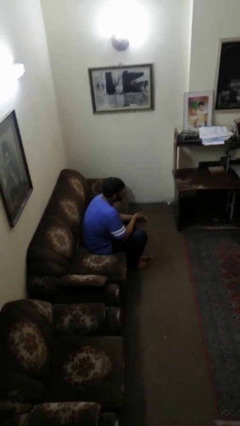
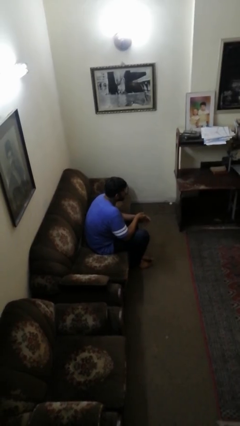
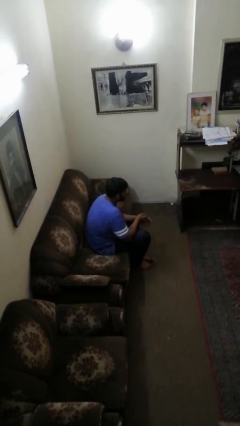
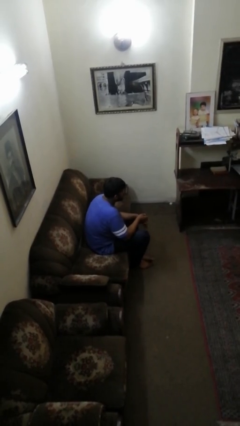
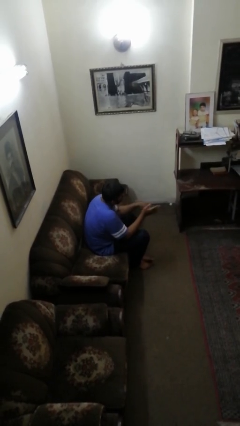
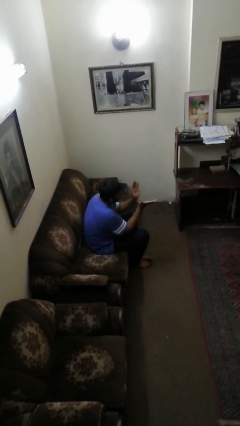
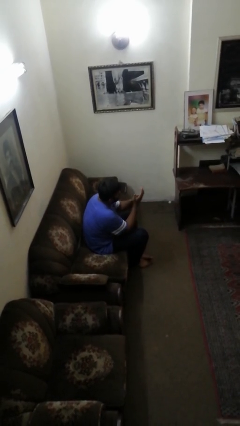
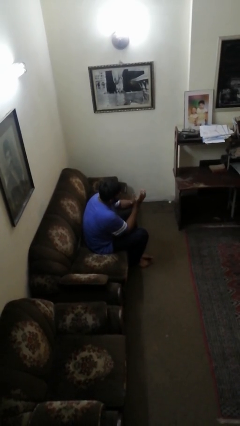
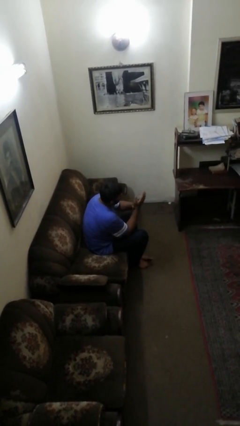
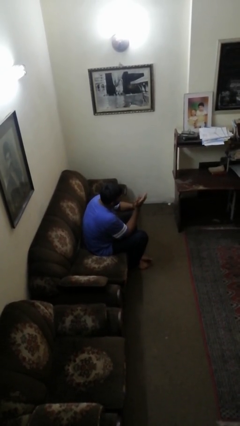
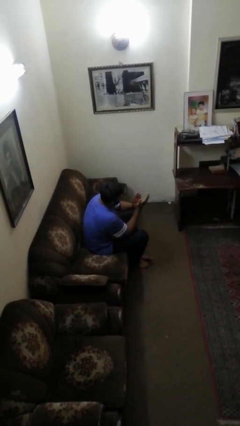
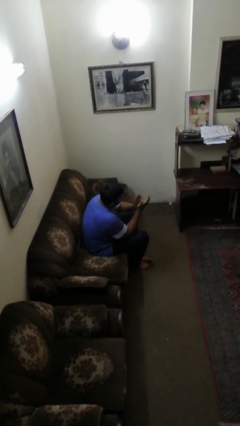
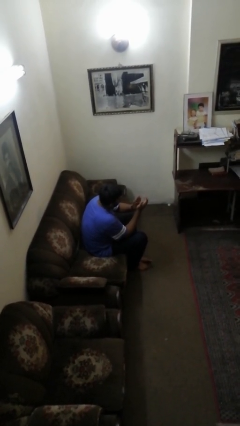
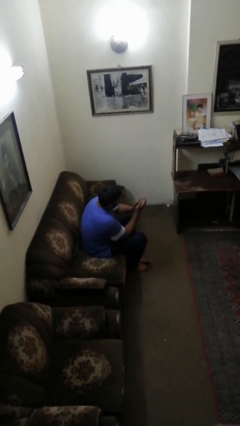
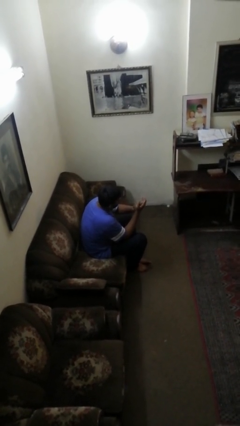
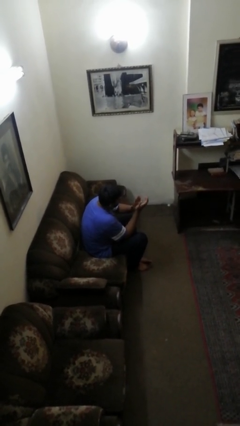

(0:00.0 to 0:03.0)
person claps hands

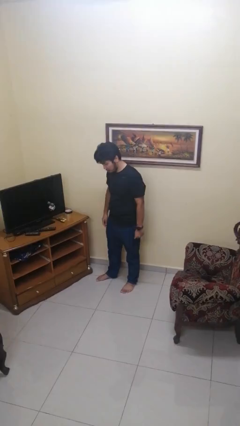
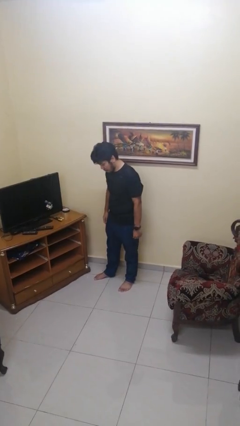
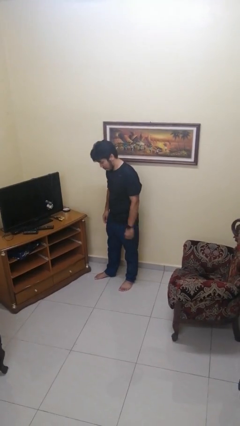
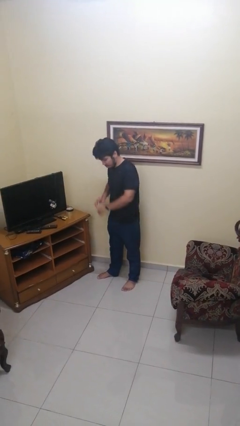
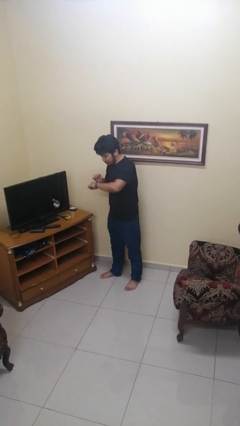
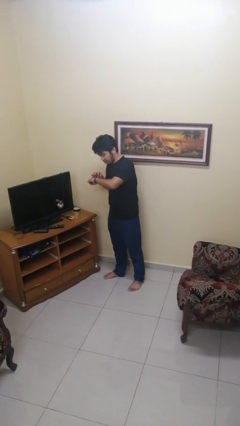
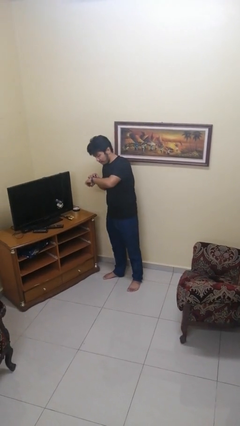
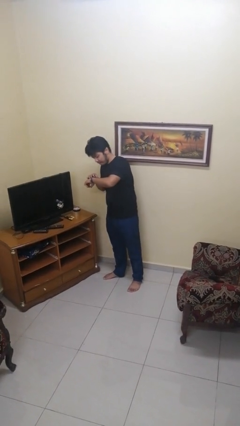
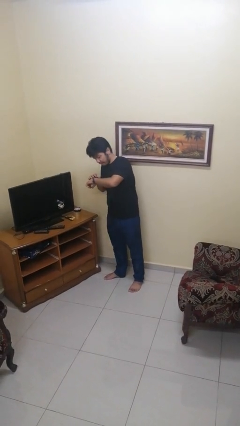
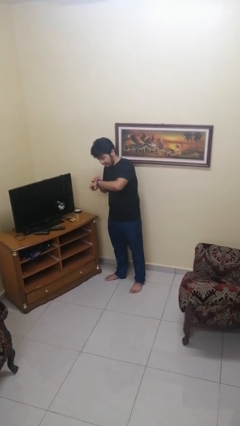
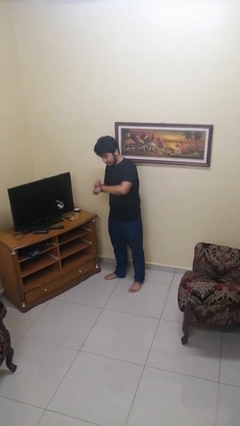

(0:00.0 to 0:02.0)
person looks at wristwatch

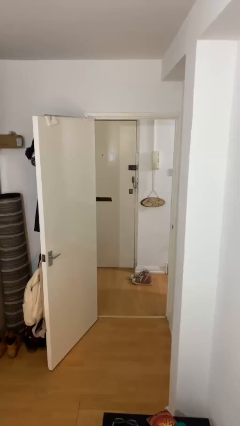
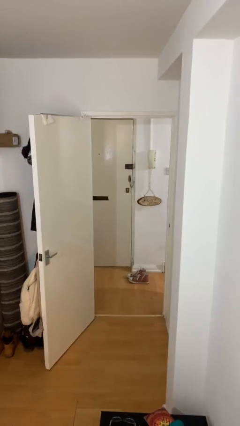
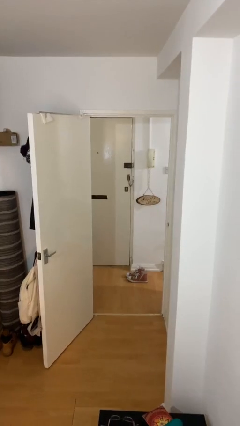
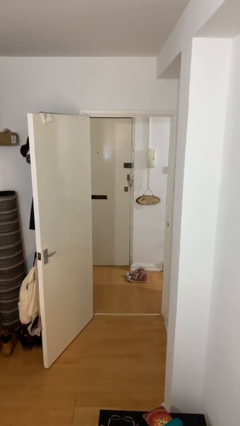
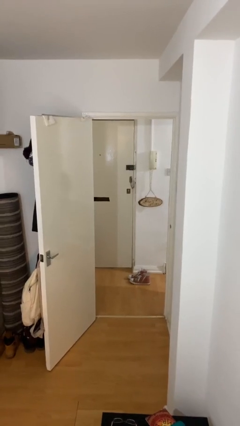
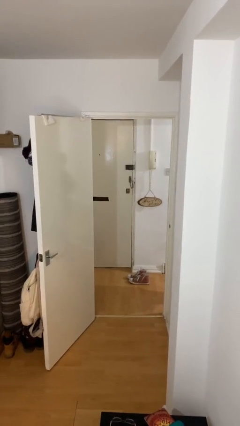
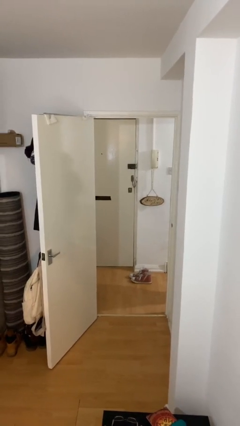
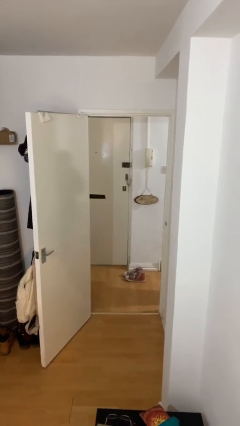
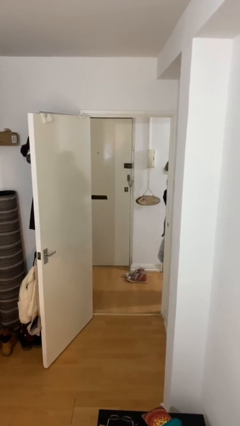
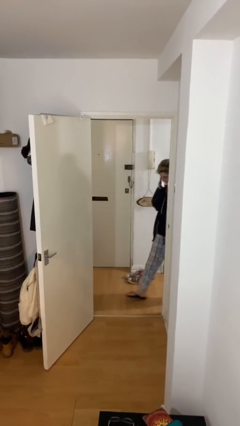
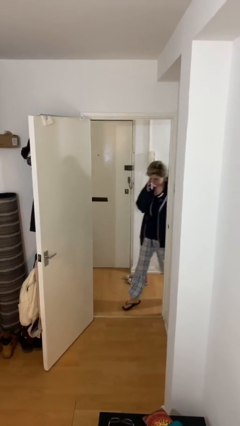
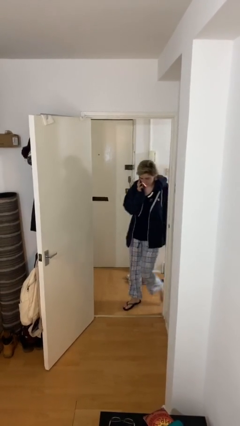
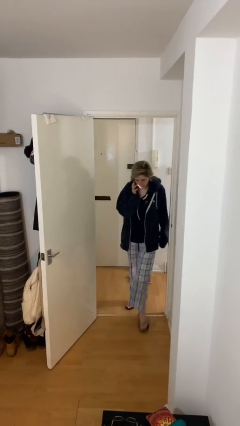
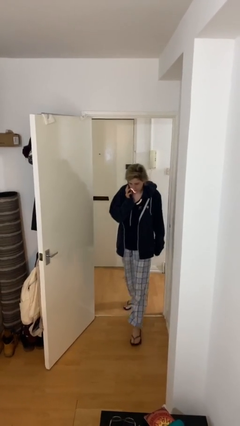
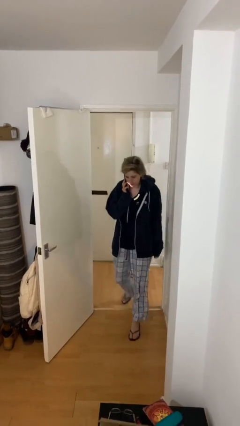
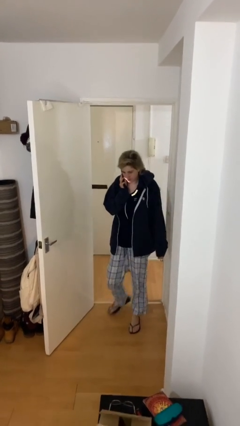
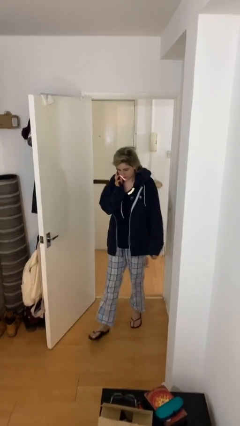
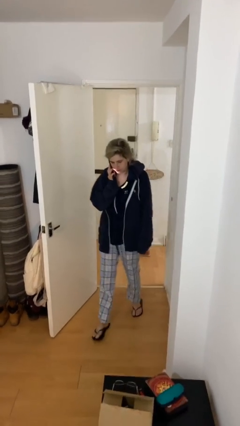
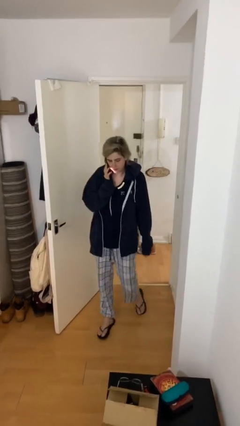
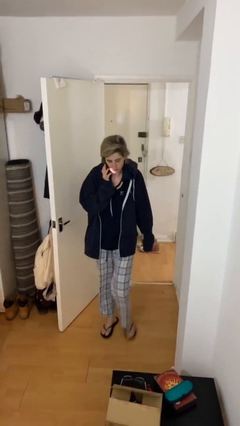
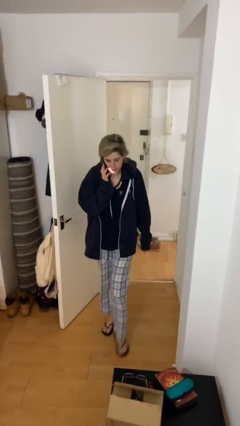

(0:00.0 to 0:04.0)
person enters scene through structure

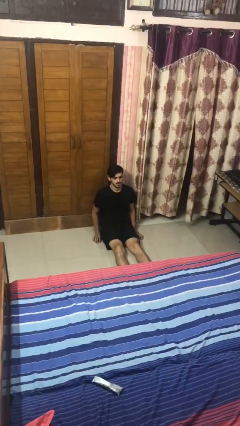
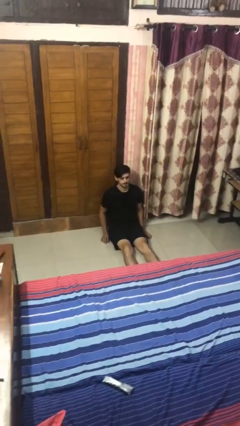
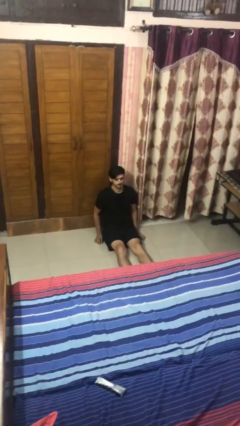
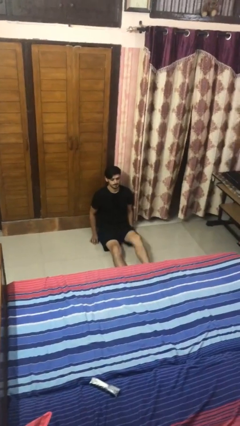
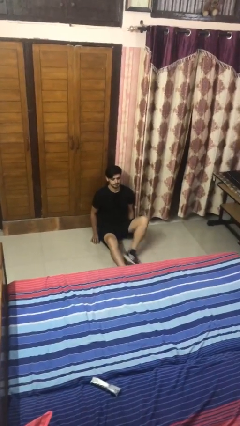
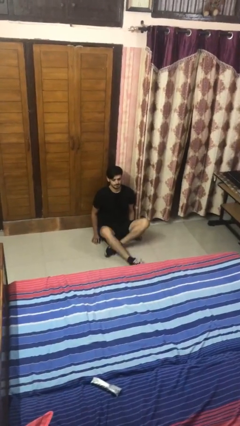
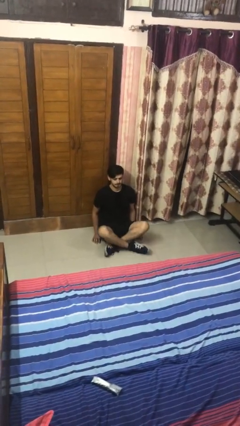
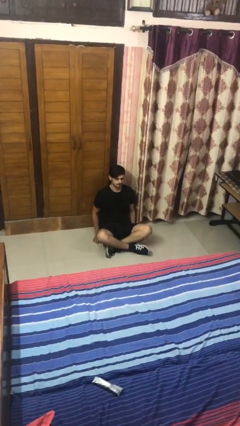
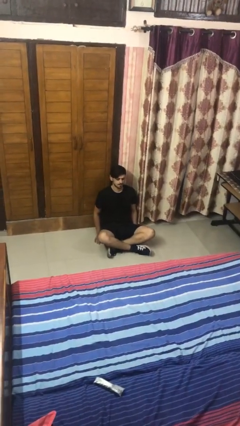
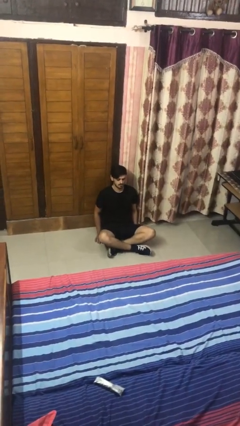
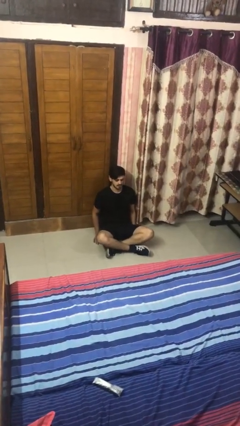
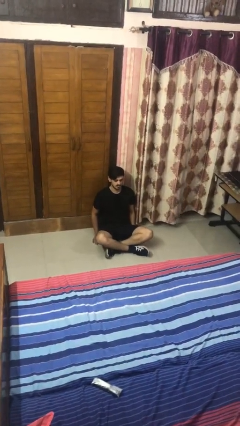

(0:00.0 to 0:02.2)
person crosses legs

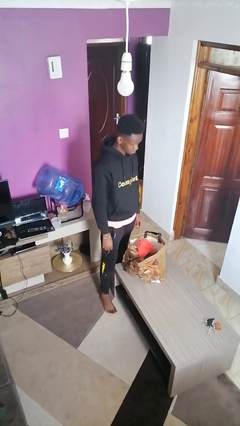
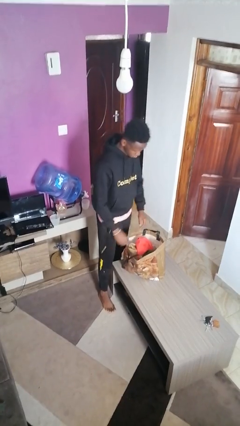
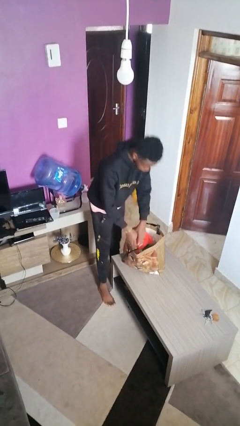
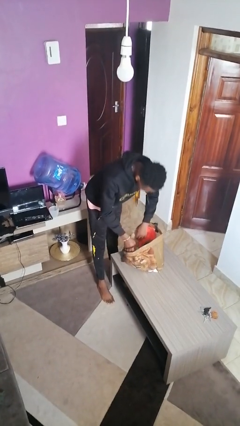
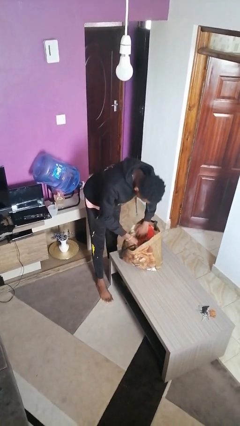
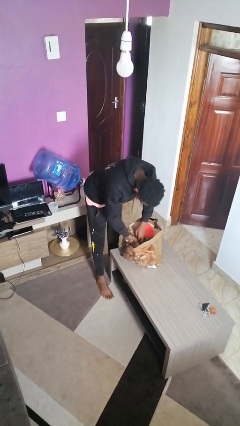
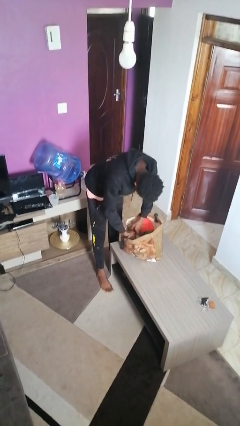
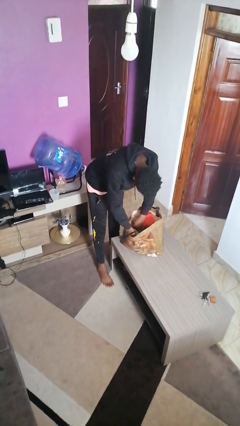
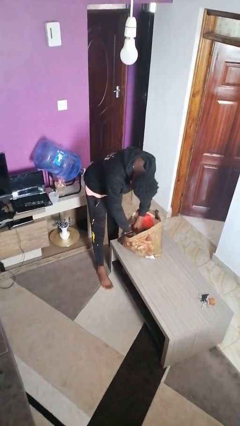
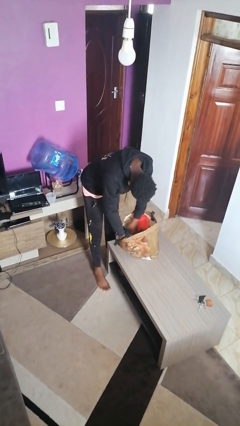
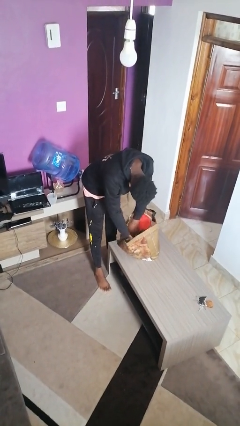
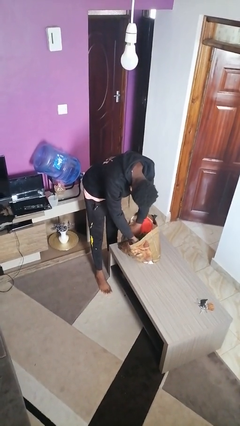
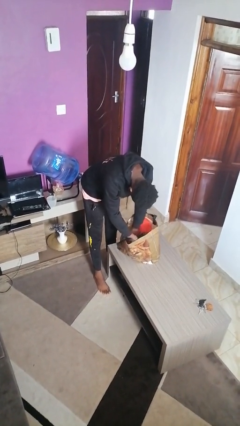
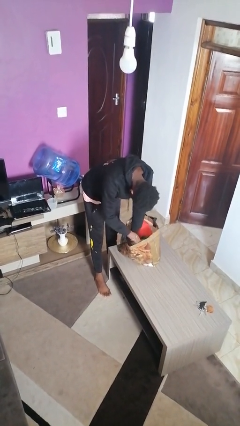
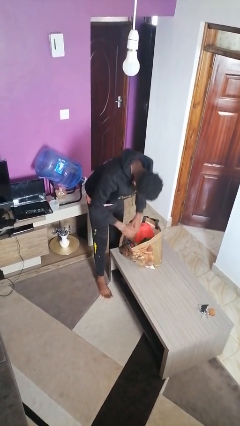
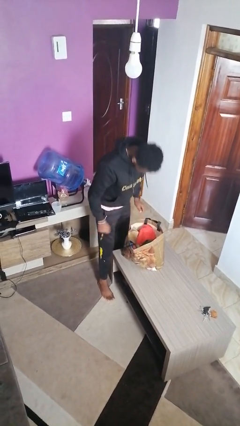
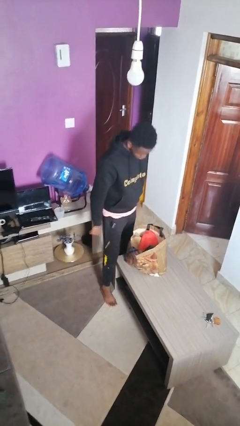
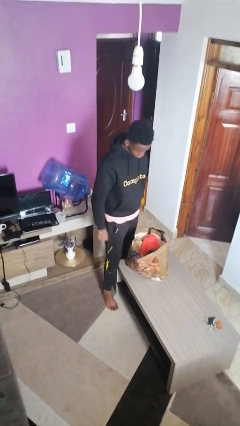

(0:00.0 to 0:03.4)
person searches in bag

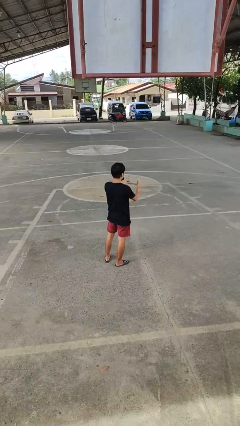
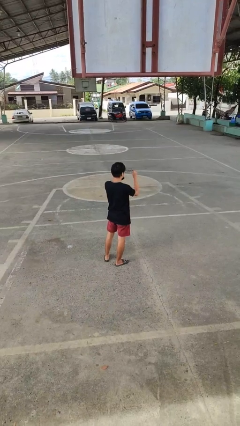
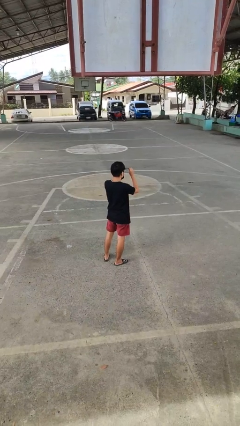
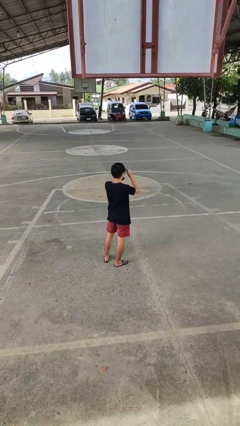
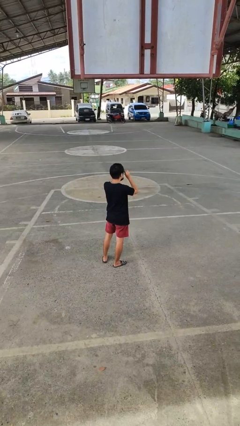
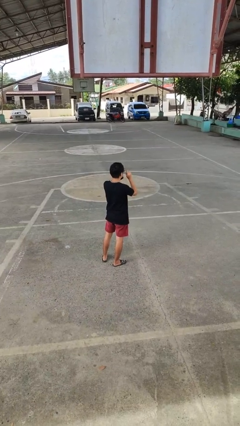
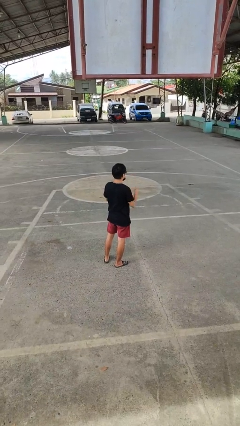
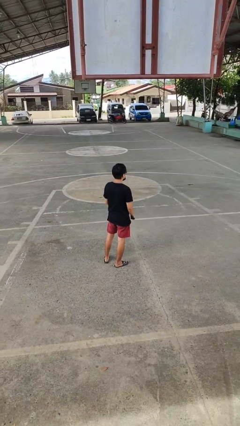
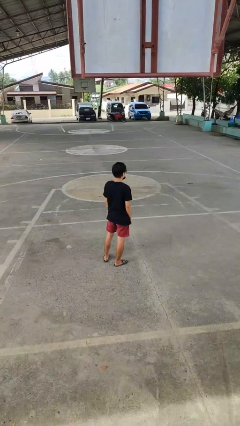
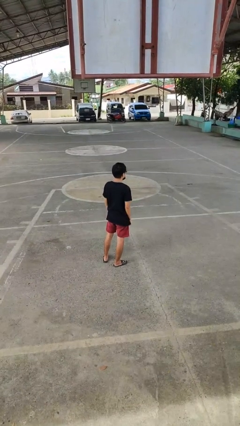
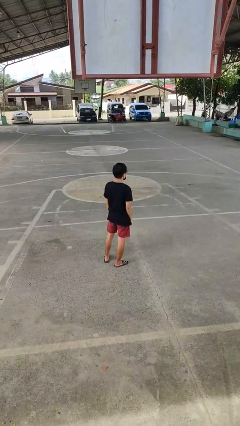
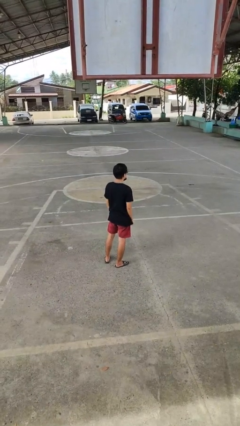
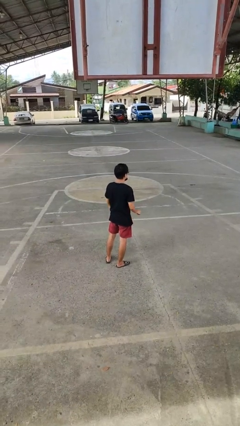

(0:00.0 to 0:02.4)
person puts on glasses
